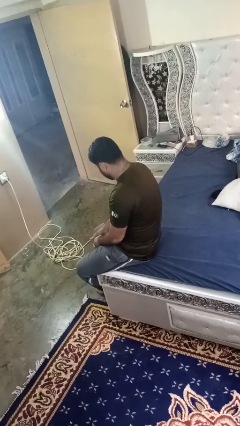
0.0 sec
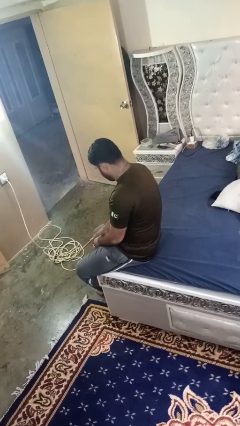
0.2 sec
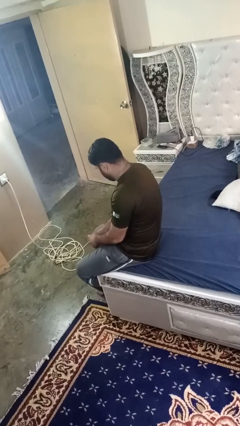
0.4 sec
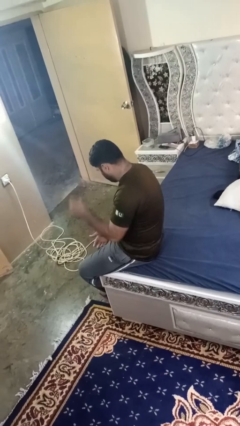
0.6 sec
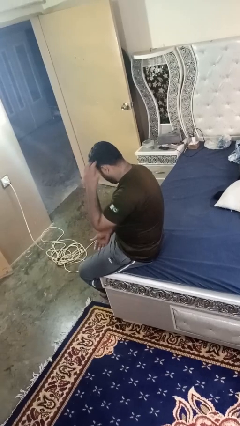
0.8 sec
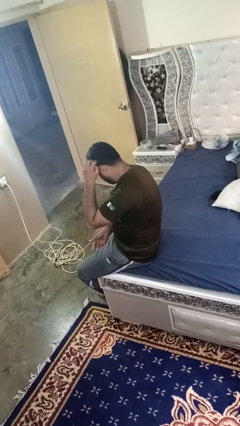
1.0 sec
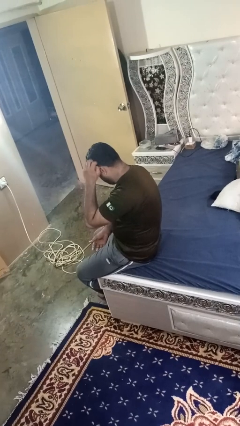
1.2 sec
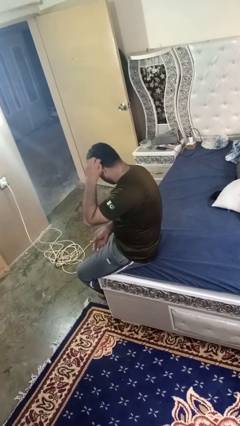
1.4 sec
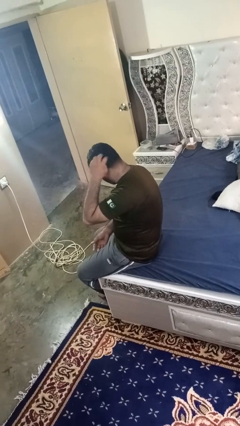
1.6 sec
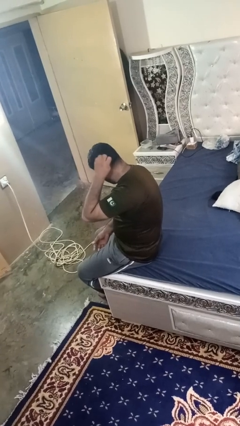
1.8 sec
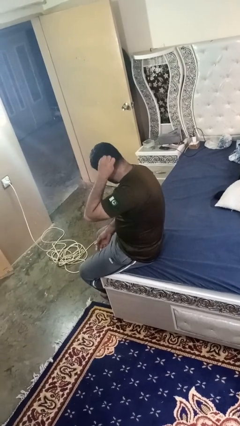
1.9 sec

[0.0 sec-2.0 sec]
person strokes hair

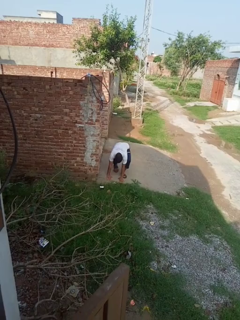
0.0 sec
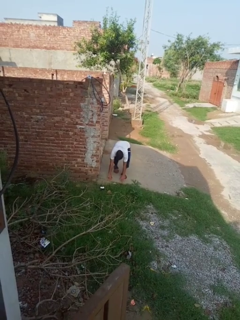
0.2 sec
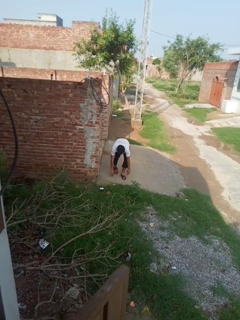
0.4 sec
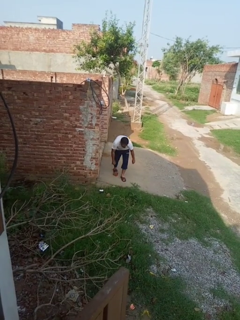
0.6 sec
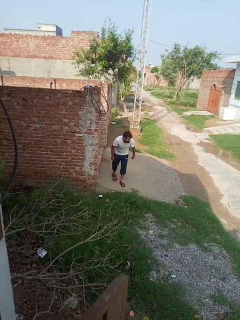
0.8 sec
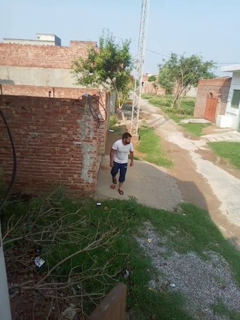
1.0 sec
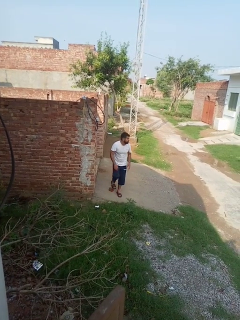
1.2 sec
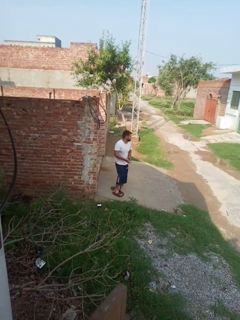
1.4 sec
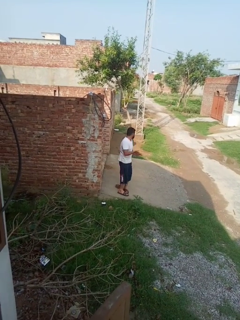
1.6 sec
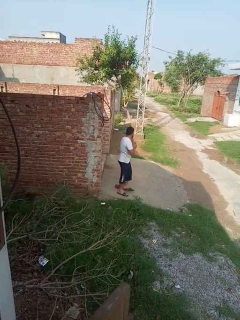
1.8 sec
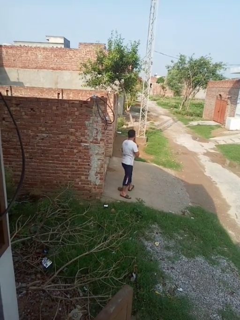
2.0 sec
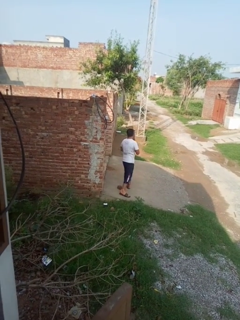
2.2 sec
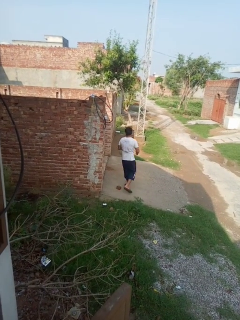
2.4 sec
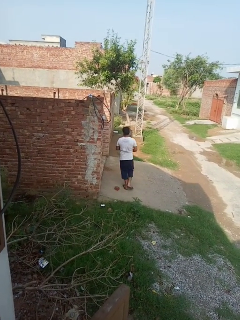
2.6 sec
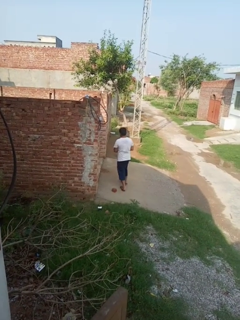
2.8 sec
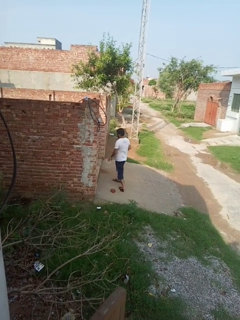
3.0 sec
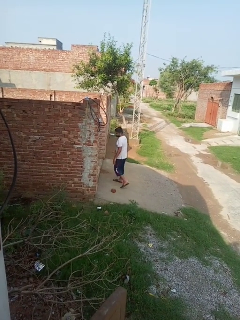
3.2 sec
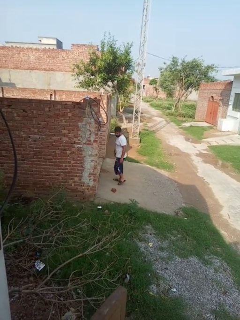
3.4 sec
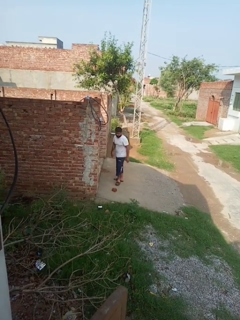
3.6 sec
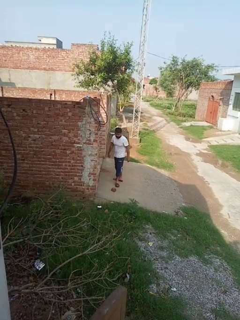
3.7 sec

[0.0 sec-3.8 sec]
person stands up from floor

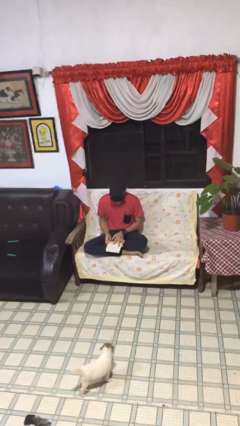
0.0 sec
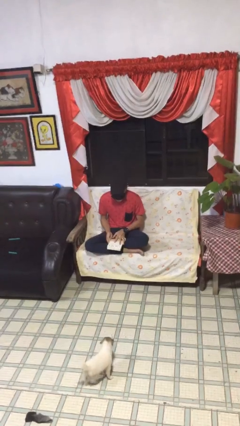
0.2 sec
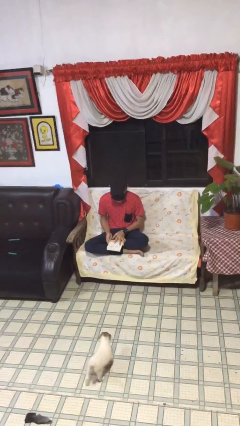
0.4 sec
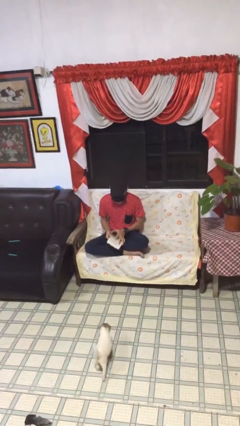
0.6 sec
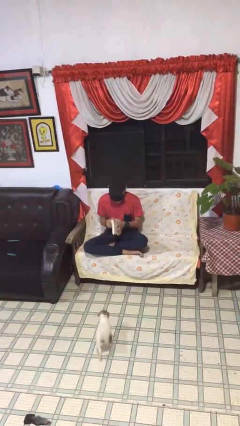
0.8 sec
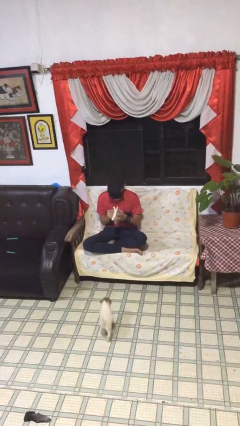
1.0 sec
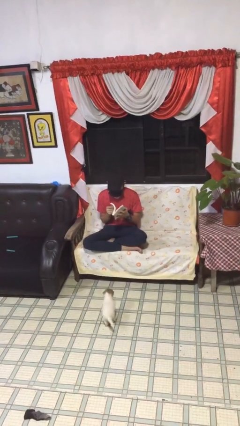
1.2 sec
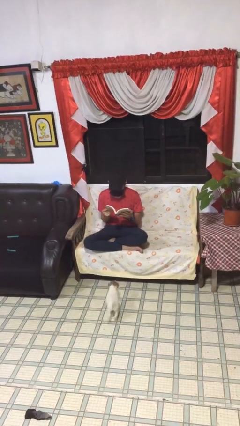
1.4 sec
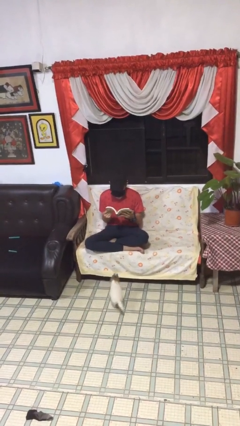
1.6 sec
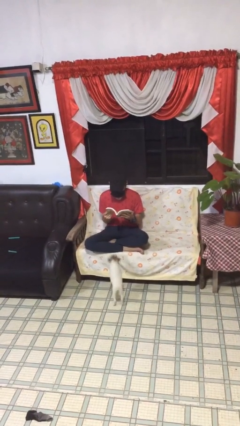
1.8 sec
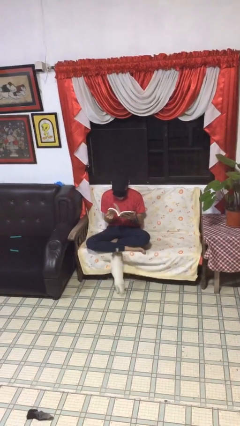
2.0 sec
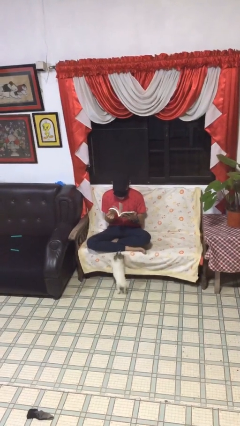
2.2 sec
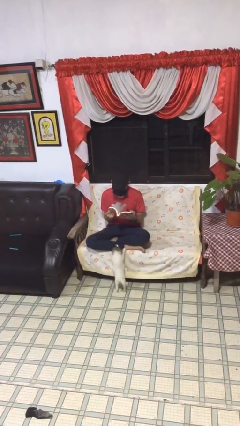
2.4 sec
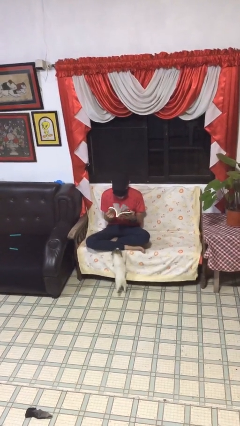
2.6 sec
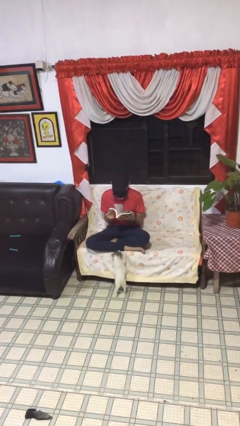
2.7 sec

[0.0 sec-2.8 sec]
person reads document

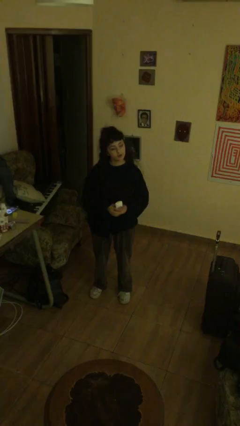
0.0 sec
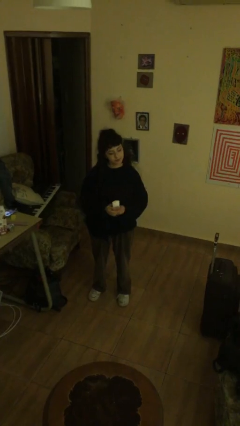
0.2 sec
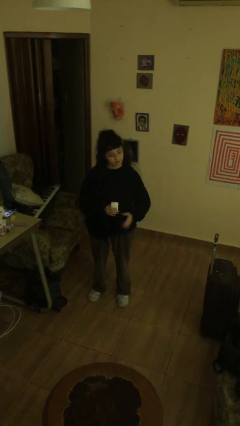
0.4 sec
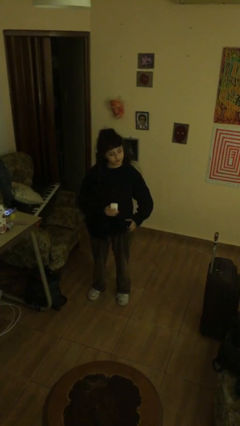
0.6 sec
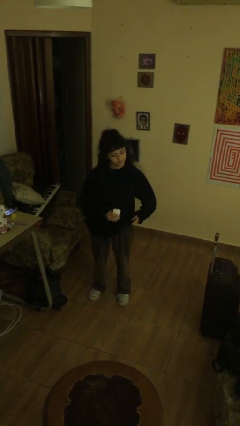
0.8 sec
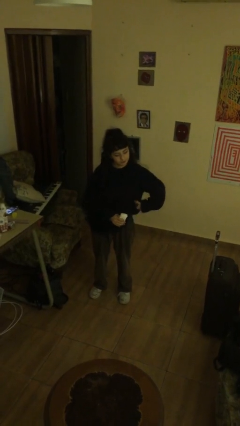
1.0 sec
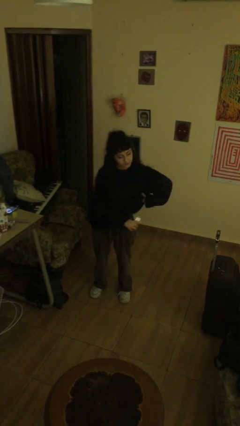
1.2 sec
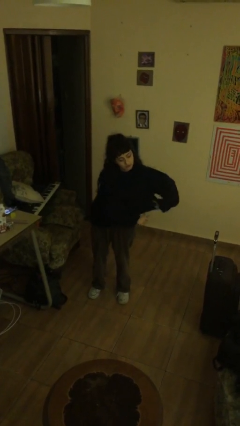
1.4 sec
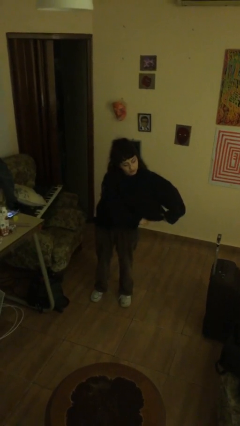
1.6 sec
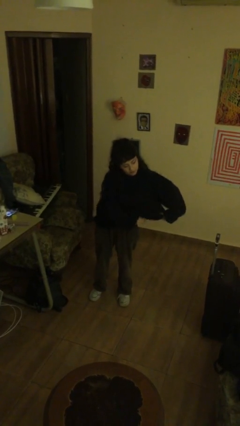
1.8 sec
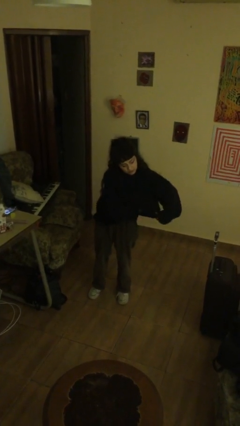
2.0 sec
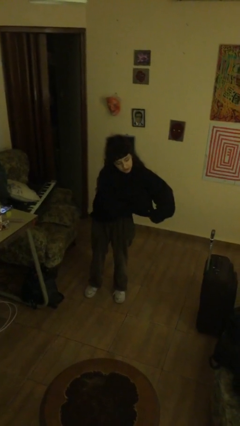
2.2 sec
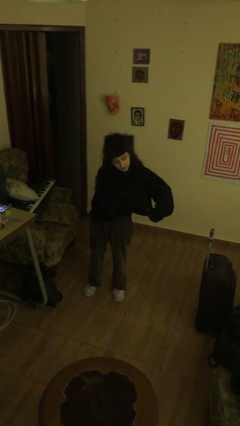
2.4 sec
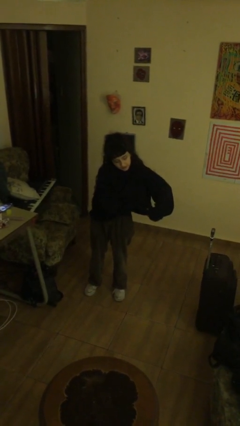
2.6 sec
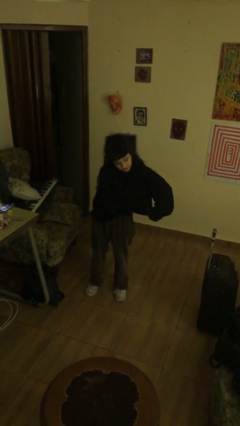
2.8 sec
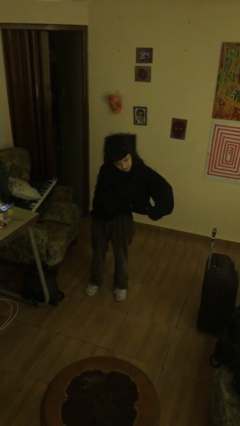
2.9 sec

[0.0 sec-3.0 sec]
person applies deodorant

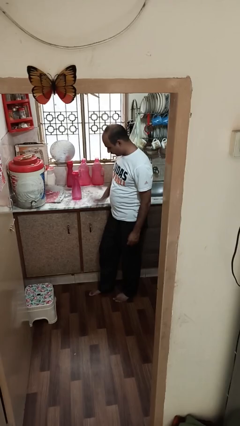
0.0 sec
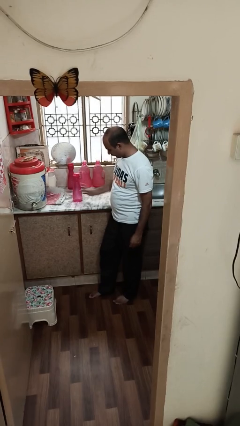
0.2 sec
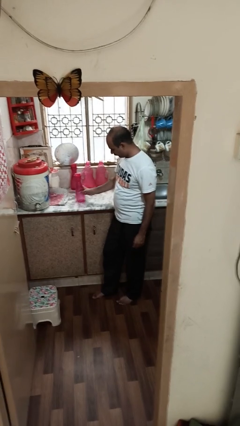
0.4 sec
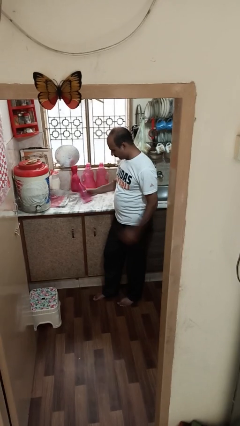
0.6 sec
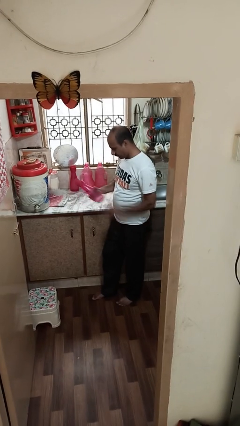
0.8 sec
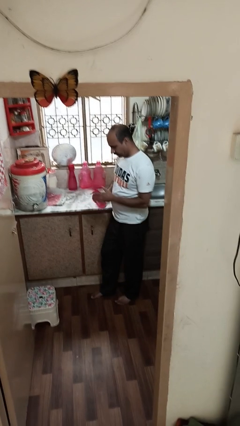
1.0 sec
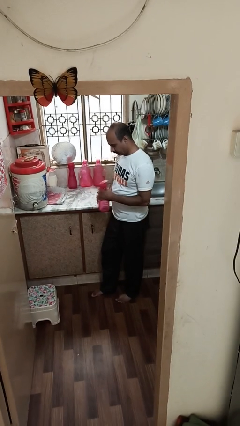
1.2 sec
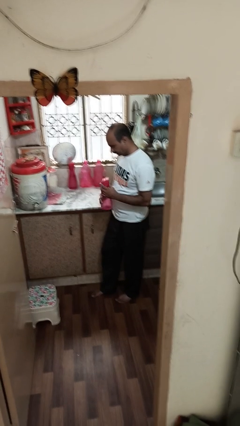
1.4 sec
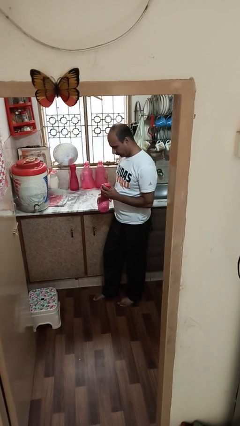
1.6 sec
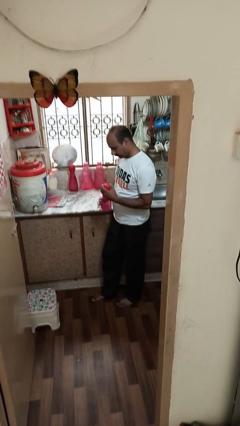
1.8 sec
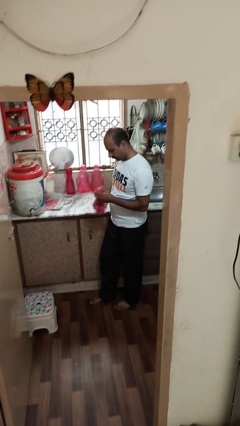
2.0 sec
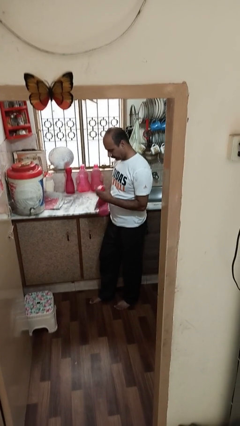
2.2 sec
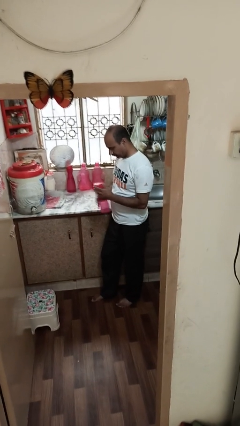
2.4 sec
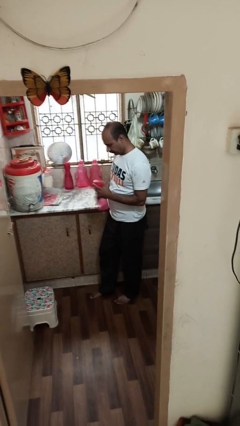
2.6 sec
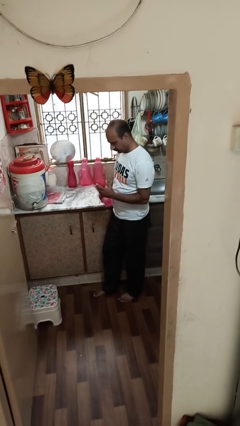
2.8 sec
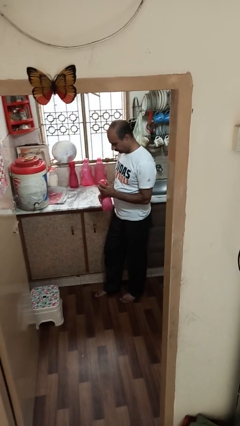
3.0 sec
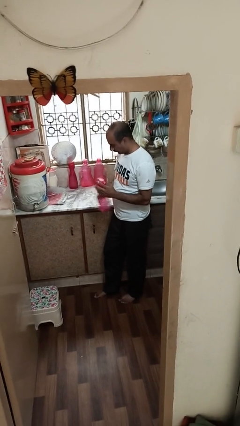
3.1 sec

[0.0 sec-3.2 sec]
person picks up object from countertop

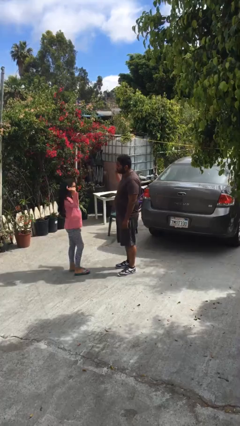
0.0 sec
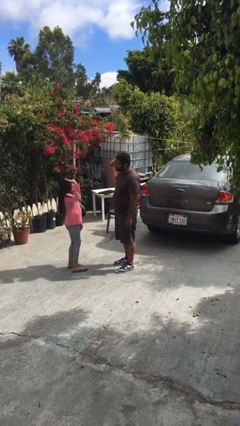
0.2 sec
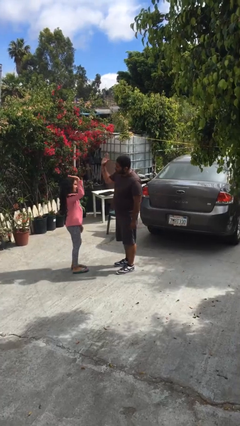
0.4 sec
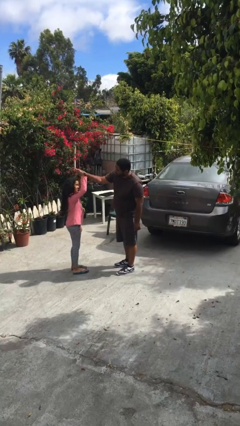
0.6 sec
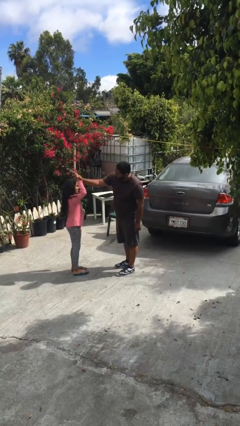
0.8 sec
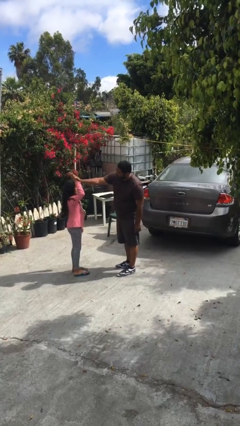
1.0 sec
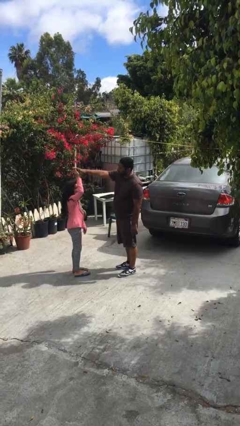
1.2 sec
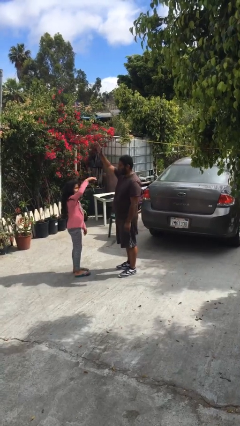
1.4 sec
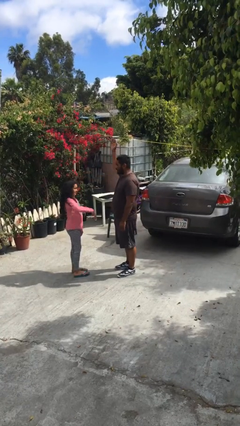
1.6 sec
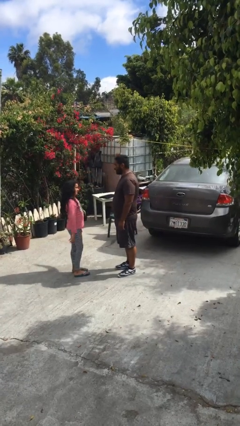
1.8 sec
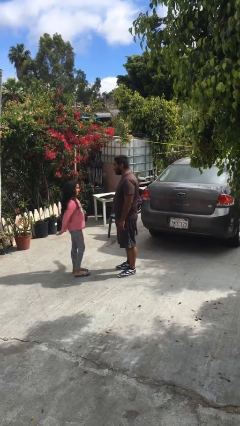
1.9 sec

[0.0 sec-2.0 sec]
person highfives hand

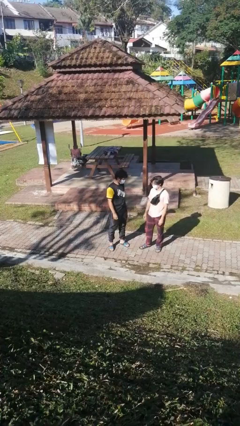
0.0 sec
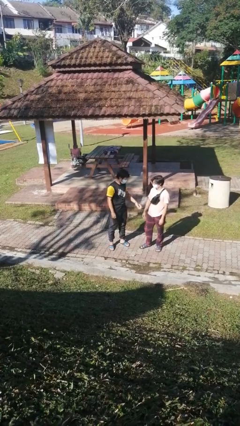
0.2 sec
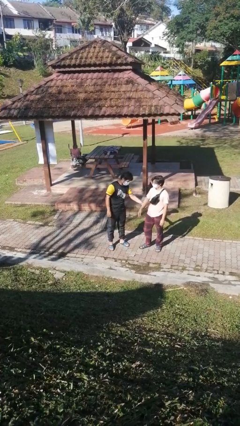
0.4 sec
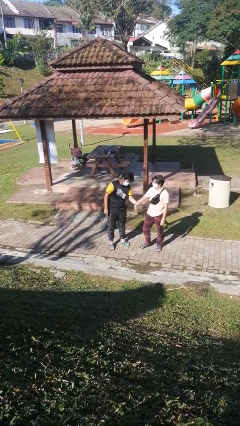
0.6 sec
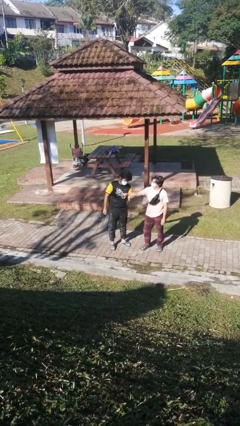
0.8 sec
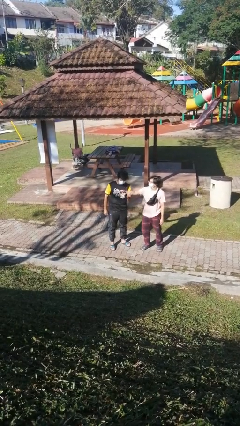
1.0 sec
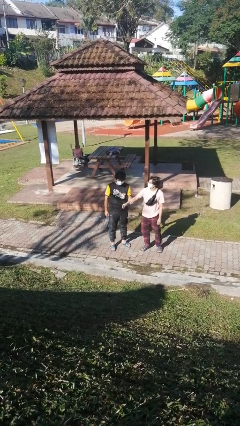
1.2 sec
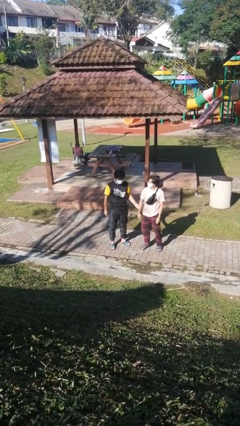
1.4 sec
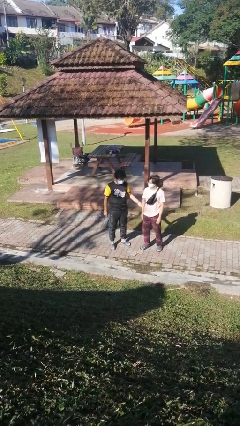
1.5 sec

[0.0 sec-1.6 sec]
person grabs person by forearm
